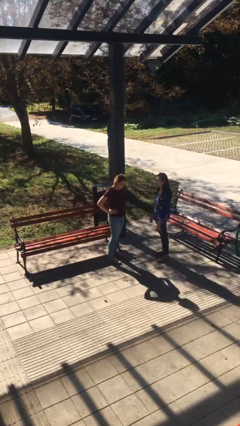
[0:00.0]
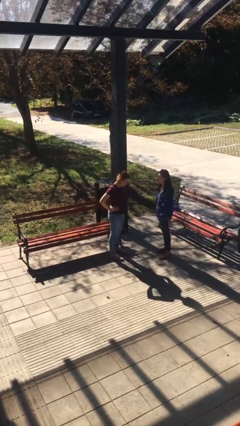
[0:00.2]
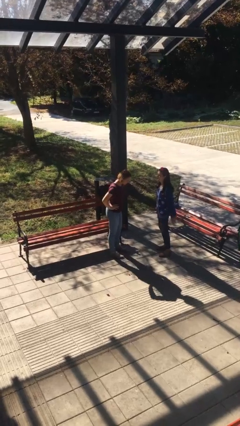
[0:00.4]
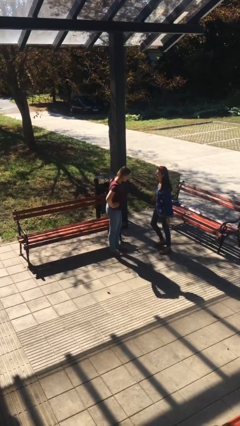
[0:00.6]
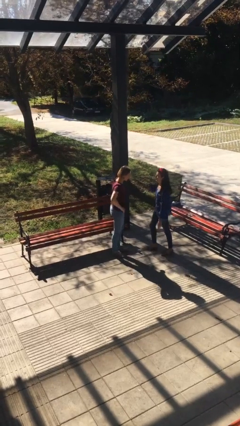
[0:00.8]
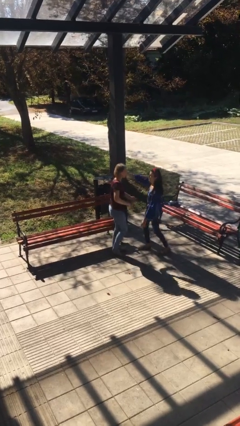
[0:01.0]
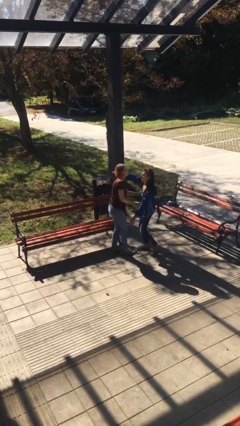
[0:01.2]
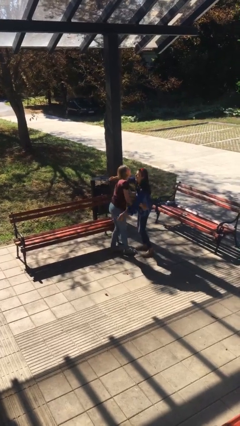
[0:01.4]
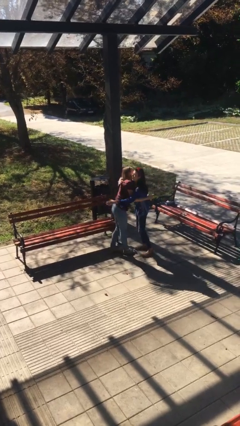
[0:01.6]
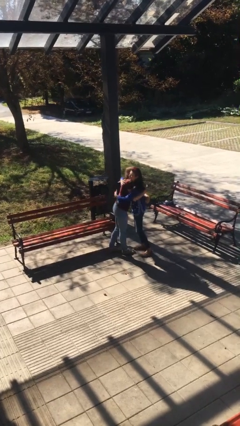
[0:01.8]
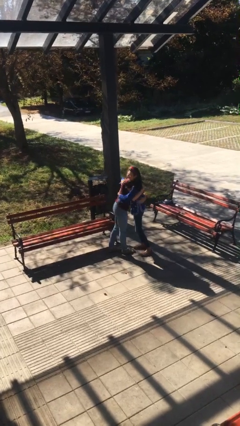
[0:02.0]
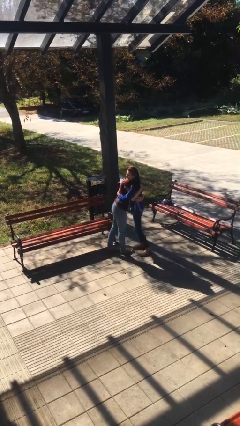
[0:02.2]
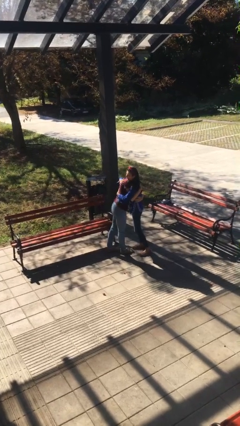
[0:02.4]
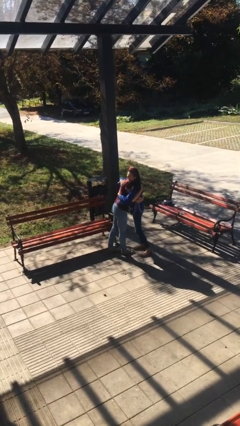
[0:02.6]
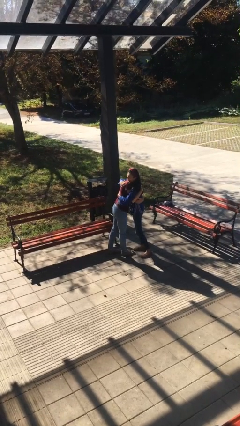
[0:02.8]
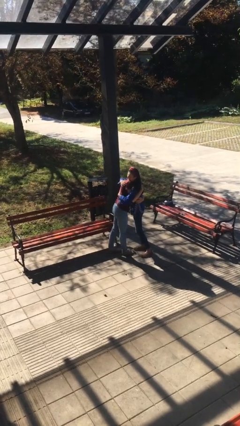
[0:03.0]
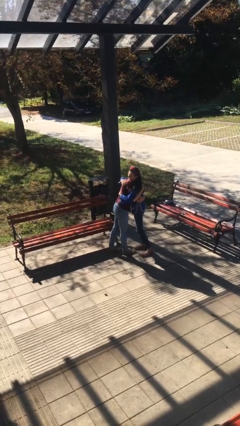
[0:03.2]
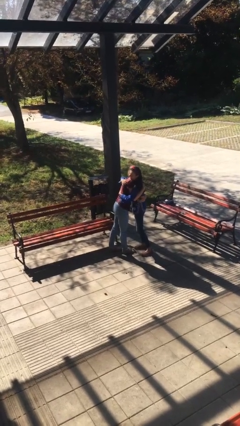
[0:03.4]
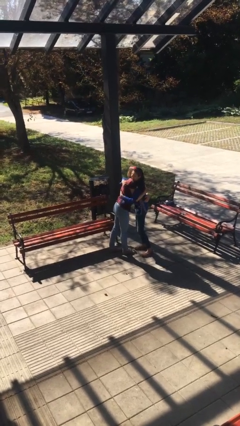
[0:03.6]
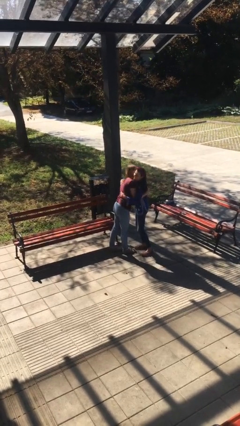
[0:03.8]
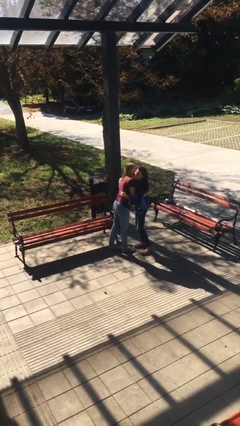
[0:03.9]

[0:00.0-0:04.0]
person embraces person

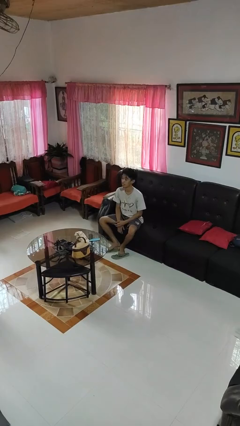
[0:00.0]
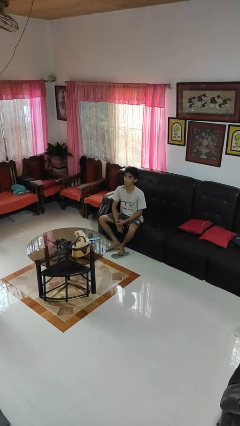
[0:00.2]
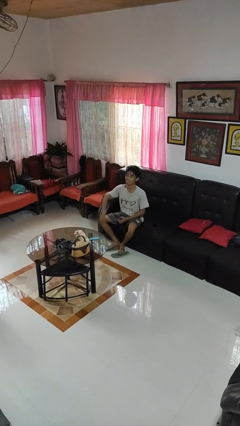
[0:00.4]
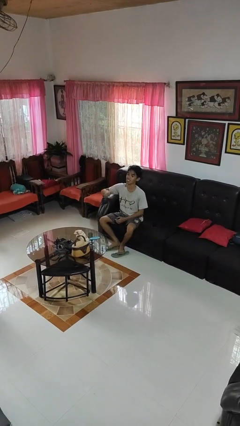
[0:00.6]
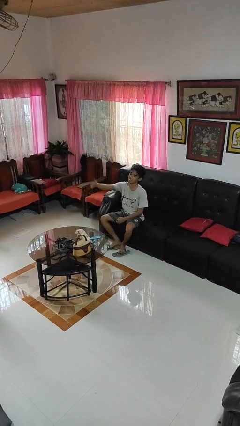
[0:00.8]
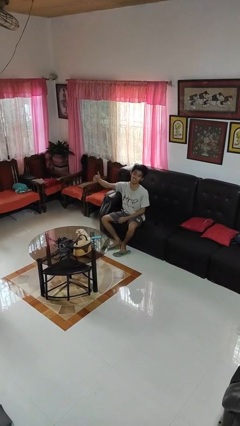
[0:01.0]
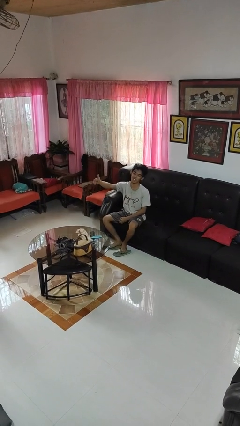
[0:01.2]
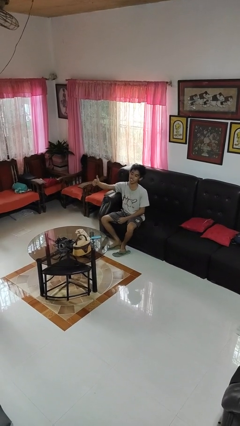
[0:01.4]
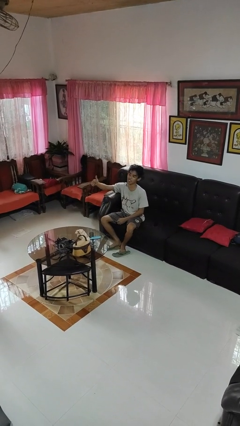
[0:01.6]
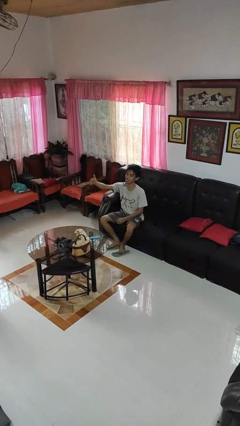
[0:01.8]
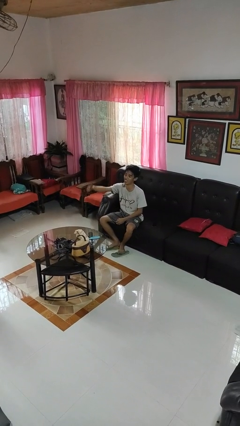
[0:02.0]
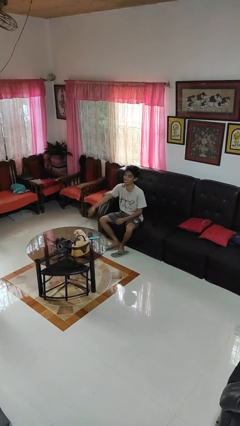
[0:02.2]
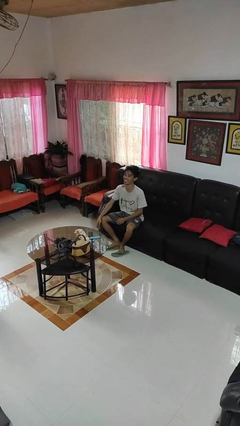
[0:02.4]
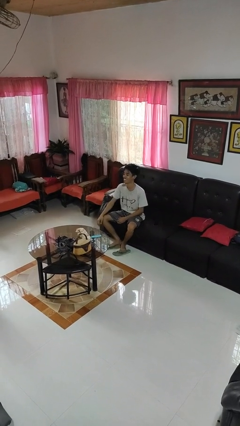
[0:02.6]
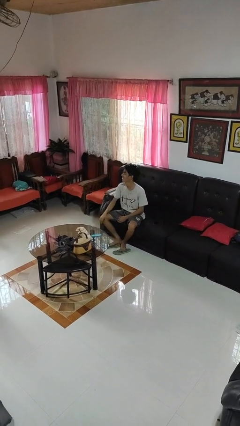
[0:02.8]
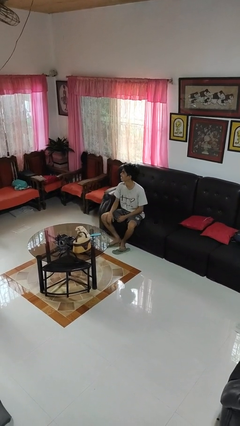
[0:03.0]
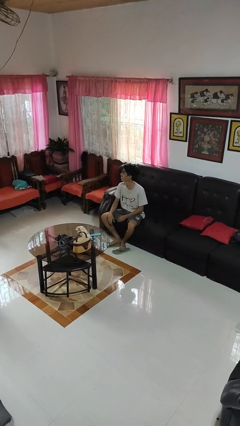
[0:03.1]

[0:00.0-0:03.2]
person gestures thumbs up

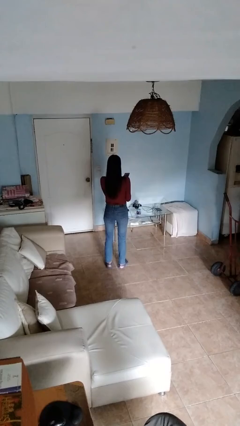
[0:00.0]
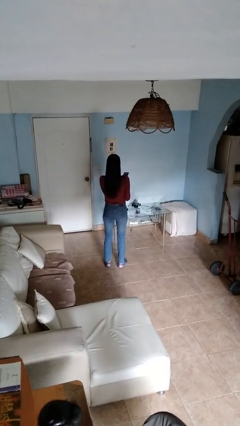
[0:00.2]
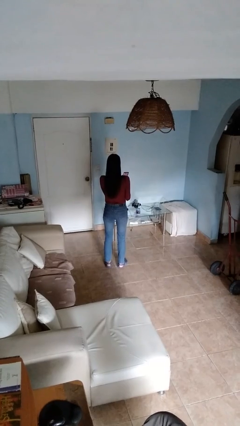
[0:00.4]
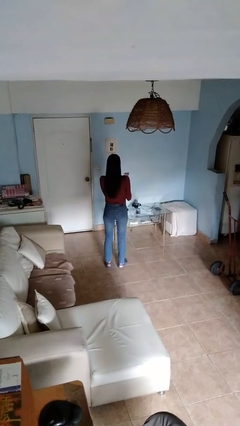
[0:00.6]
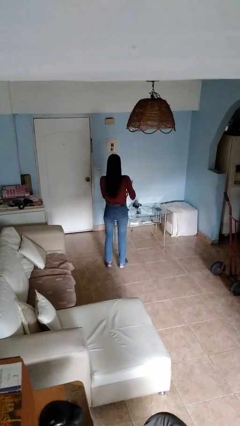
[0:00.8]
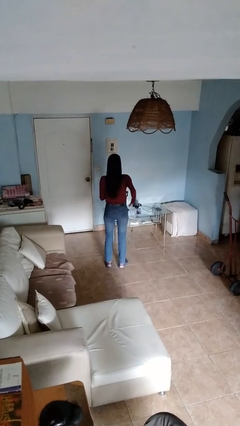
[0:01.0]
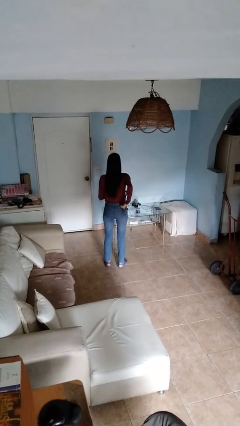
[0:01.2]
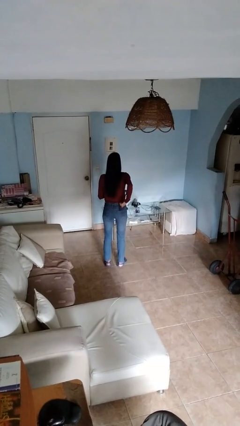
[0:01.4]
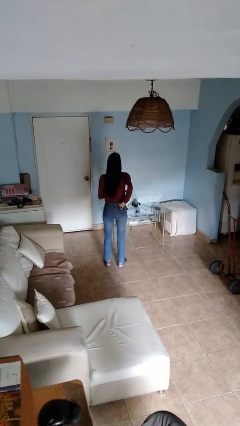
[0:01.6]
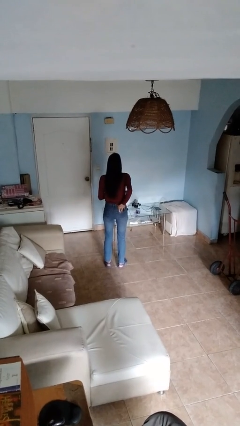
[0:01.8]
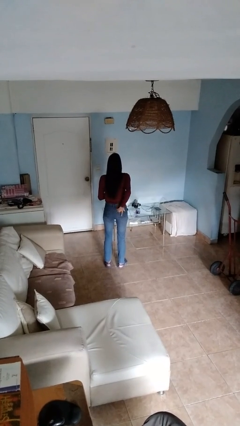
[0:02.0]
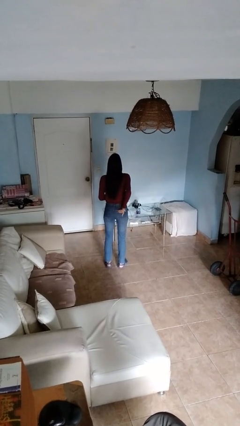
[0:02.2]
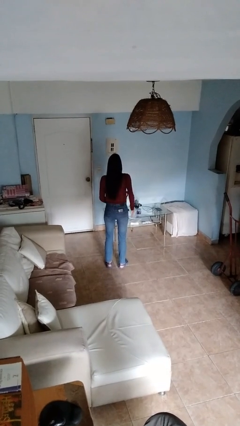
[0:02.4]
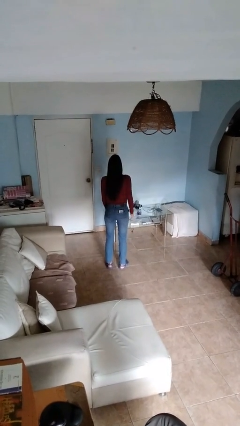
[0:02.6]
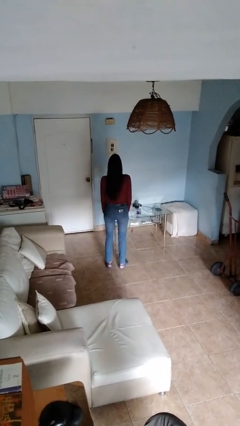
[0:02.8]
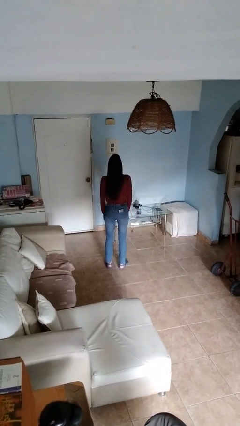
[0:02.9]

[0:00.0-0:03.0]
person puts phone into pocket

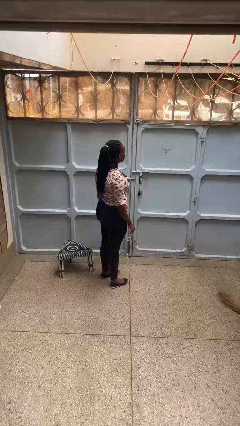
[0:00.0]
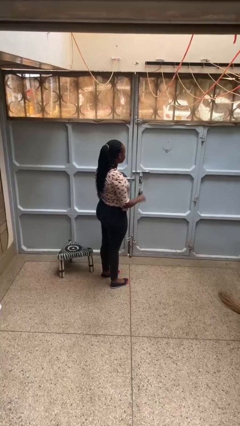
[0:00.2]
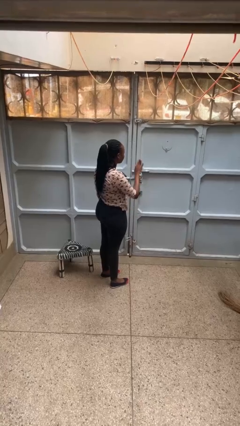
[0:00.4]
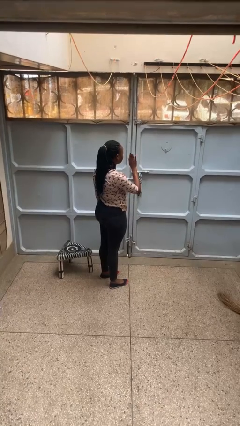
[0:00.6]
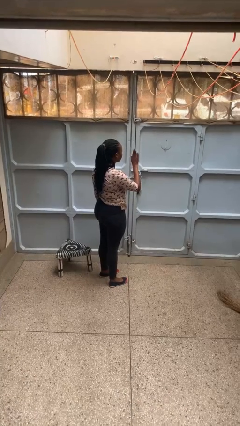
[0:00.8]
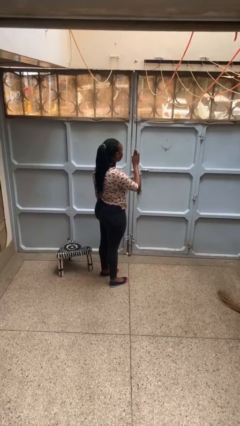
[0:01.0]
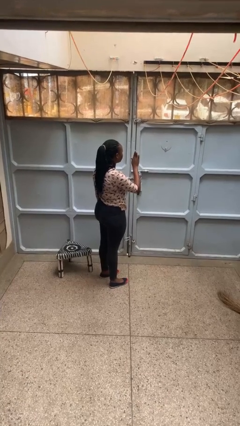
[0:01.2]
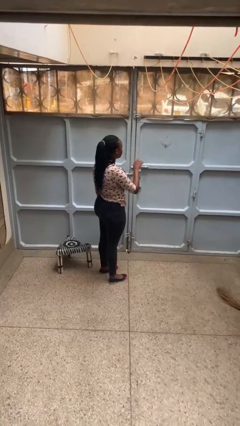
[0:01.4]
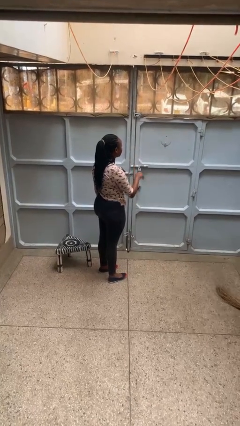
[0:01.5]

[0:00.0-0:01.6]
person gestures stop

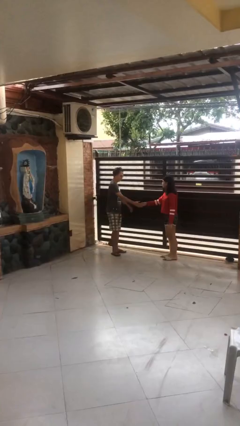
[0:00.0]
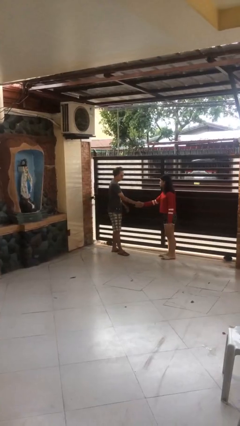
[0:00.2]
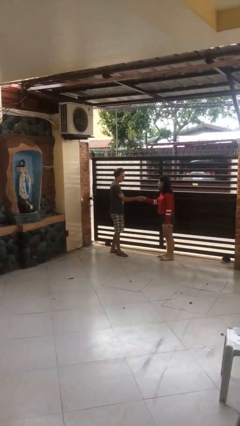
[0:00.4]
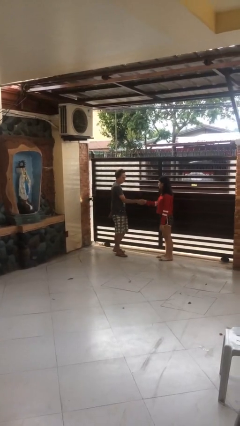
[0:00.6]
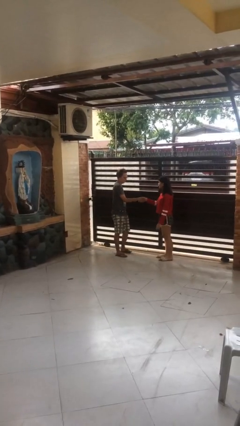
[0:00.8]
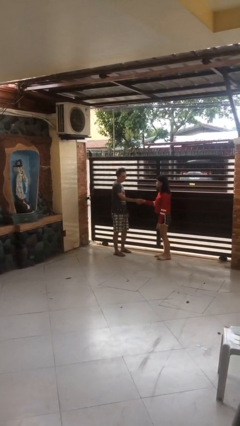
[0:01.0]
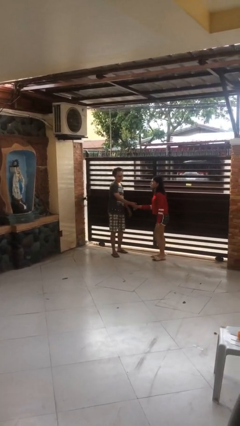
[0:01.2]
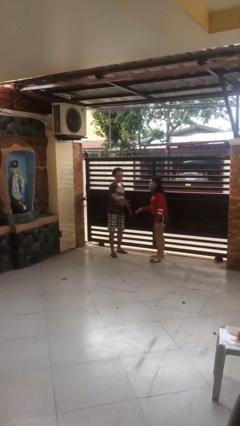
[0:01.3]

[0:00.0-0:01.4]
person shakes hand

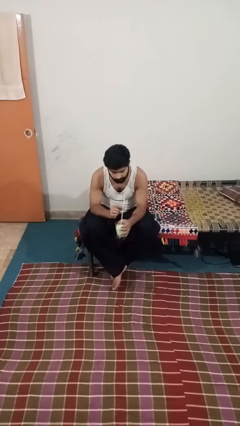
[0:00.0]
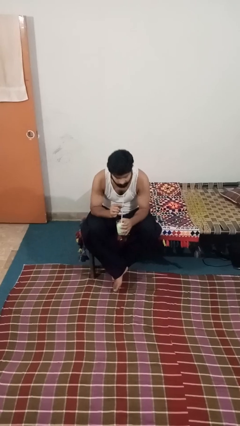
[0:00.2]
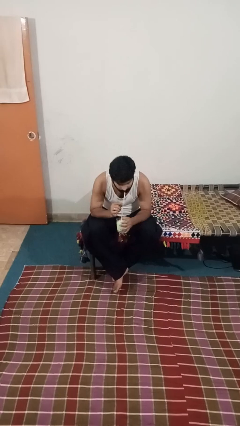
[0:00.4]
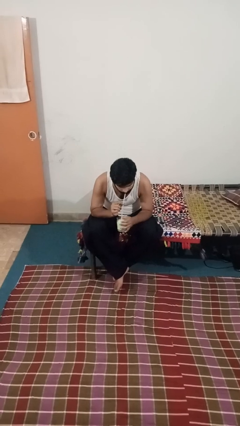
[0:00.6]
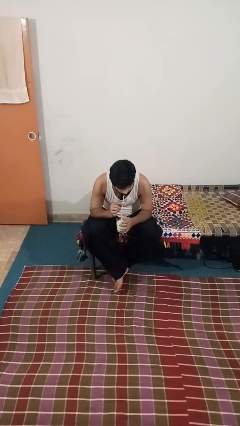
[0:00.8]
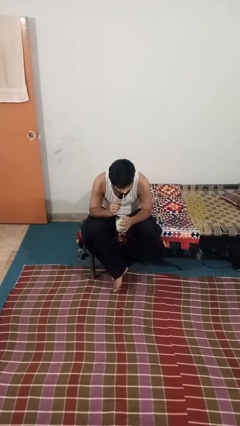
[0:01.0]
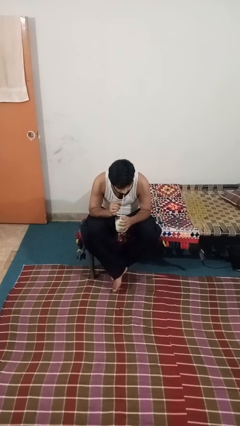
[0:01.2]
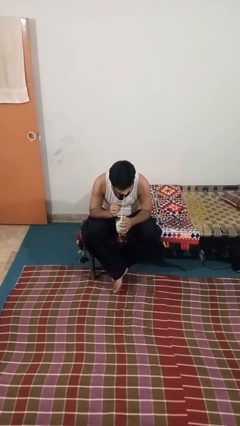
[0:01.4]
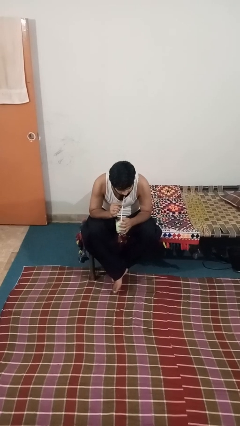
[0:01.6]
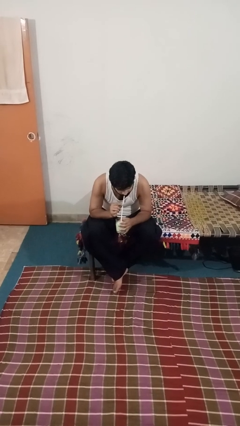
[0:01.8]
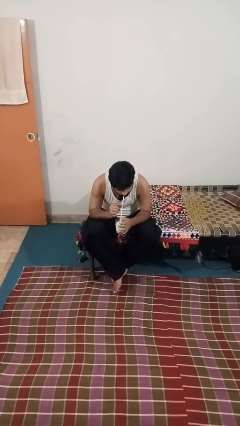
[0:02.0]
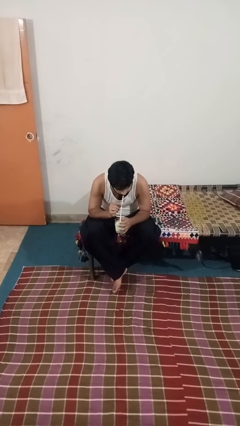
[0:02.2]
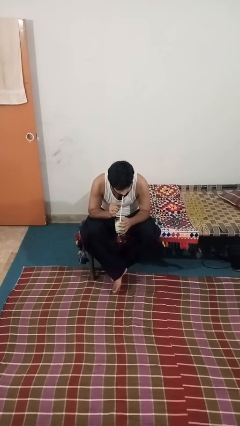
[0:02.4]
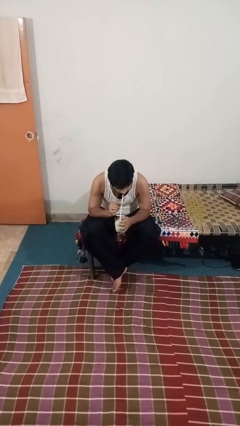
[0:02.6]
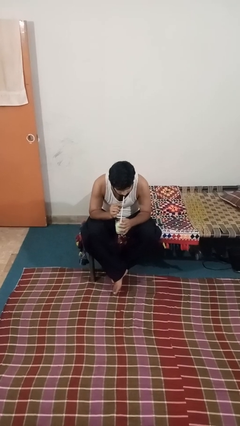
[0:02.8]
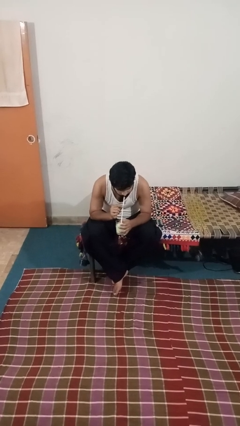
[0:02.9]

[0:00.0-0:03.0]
person drinks from straw

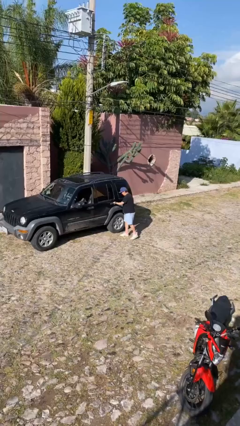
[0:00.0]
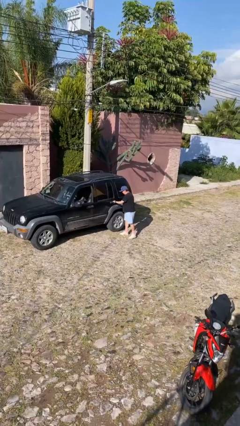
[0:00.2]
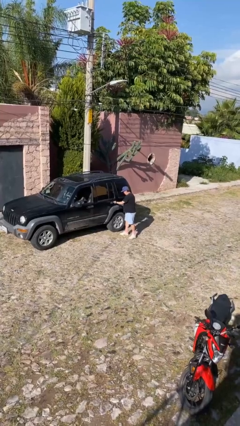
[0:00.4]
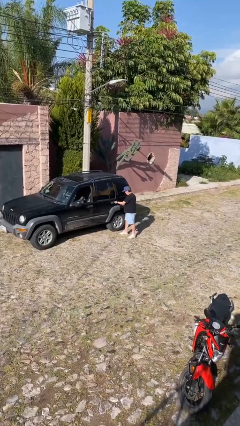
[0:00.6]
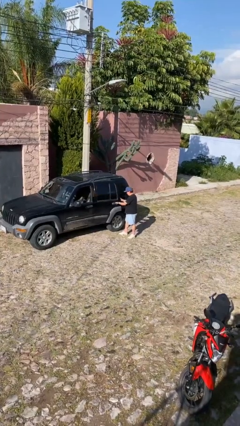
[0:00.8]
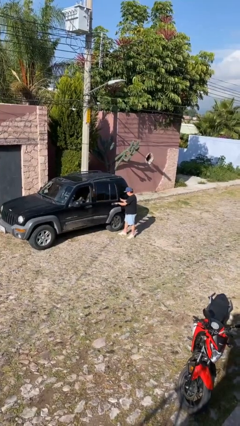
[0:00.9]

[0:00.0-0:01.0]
person opens car door
